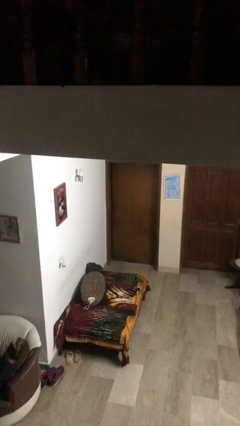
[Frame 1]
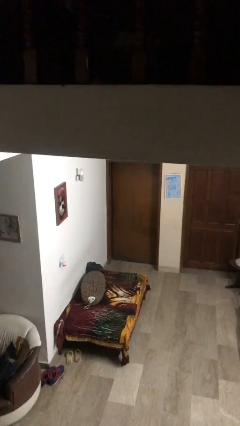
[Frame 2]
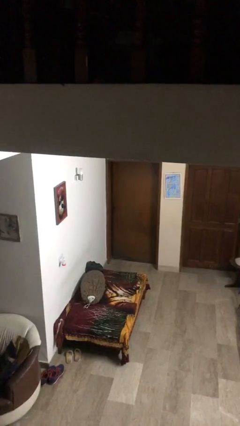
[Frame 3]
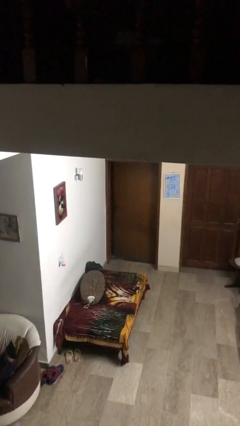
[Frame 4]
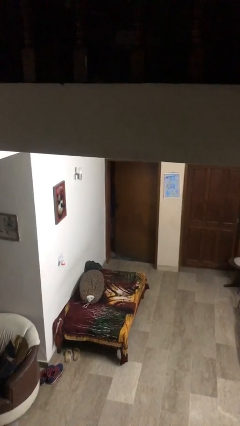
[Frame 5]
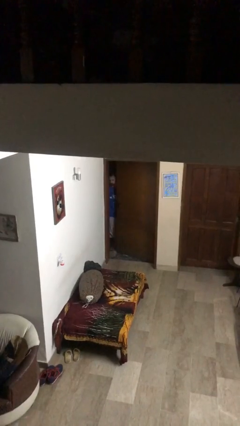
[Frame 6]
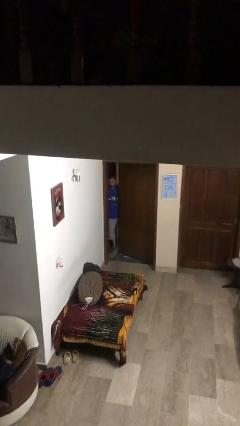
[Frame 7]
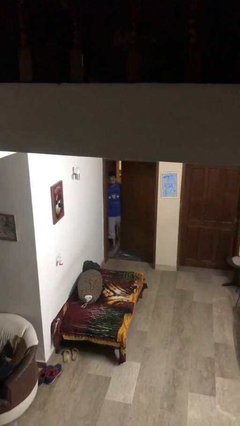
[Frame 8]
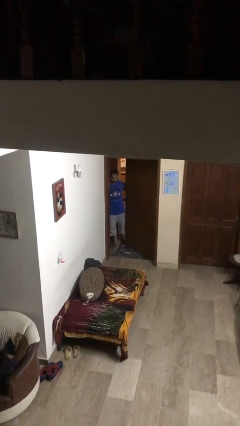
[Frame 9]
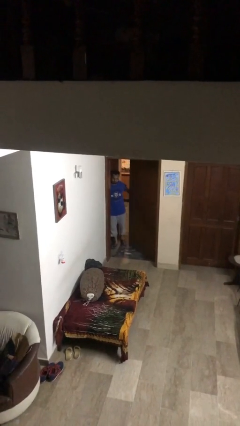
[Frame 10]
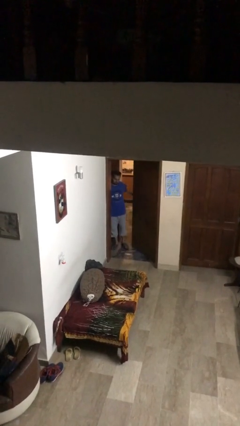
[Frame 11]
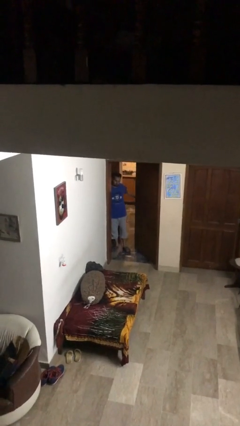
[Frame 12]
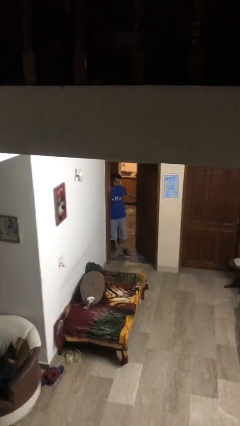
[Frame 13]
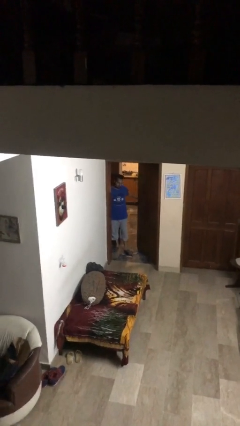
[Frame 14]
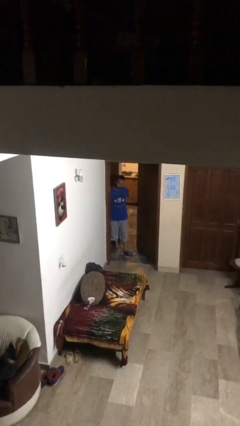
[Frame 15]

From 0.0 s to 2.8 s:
person opens facility door

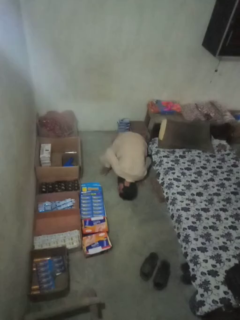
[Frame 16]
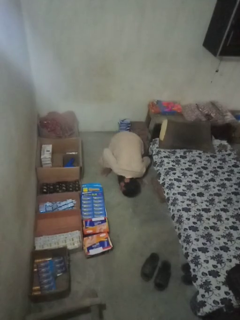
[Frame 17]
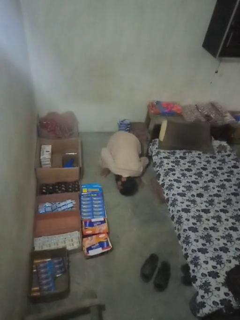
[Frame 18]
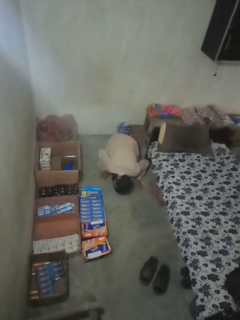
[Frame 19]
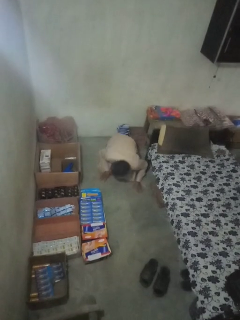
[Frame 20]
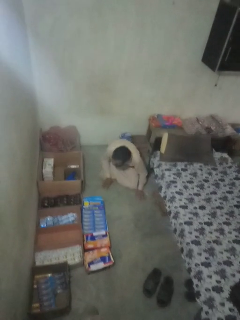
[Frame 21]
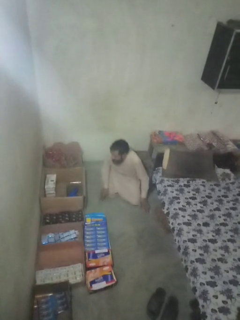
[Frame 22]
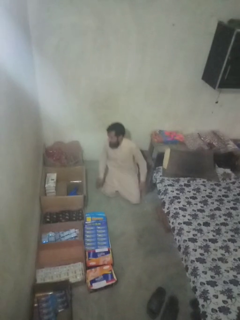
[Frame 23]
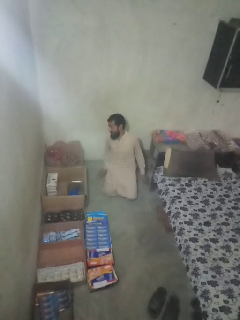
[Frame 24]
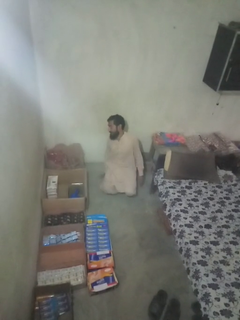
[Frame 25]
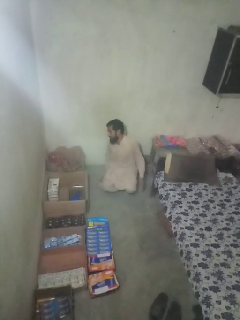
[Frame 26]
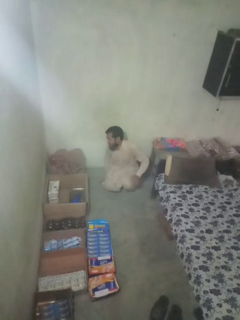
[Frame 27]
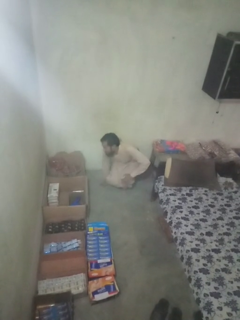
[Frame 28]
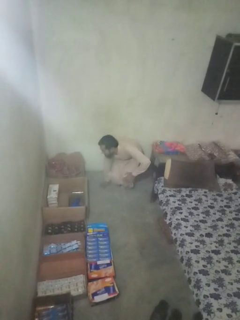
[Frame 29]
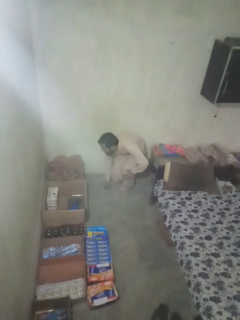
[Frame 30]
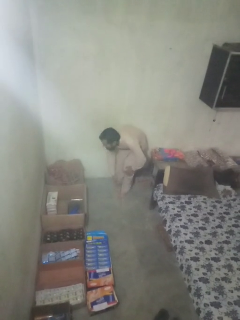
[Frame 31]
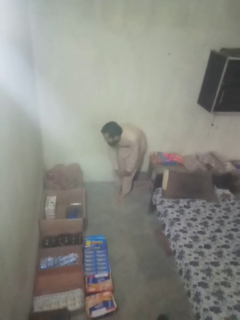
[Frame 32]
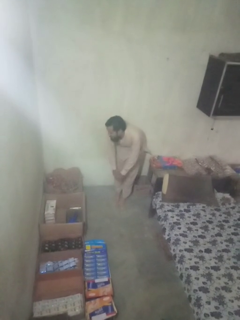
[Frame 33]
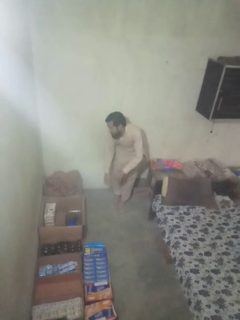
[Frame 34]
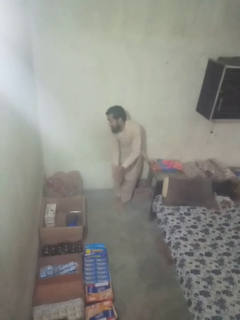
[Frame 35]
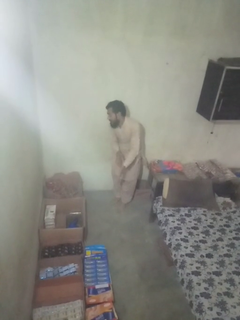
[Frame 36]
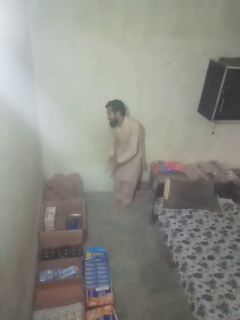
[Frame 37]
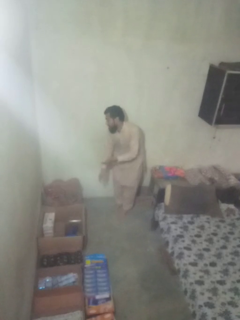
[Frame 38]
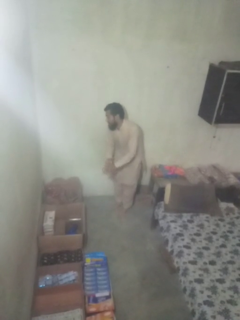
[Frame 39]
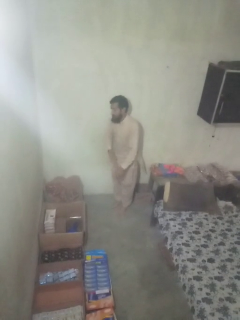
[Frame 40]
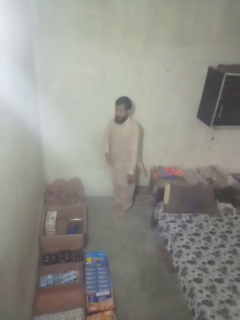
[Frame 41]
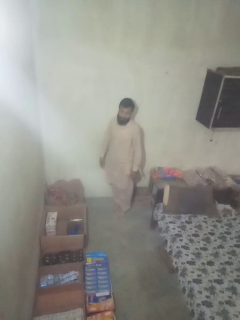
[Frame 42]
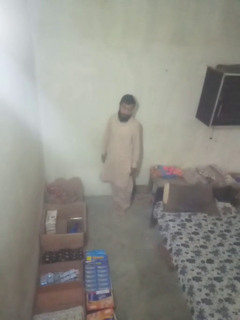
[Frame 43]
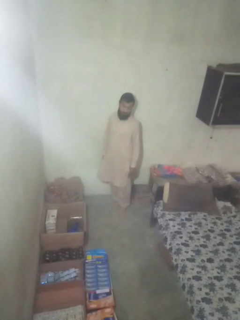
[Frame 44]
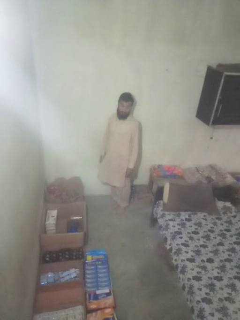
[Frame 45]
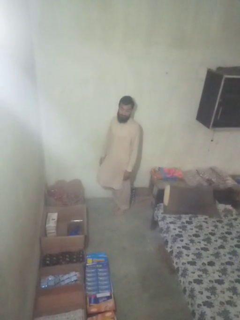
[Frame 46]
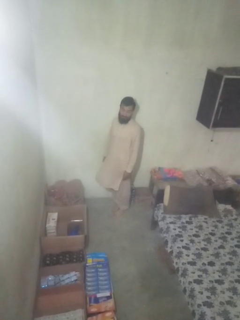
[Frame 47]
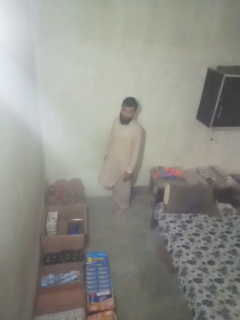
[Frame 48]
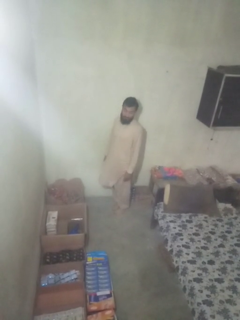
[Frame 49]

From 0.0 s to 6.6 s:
person stands up from floor

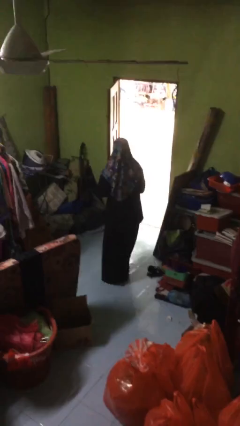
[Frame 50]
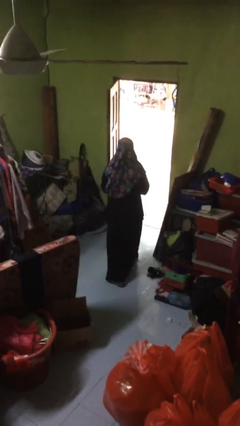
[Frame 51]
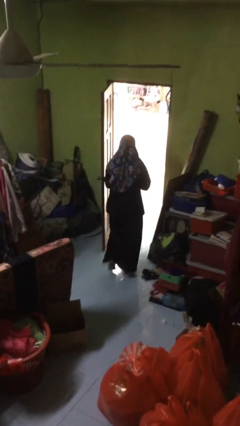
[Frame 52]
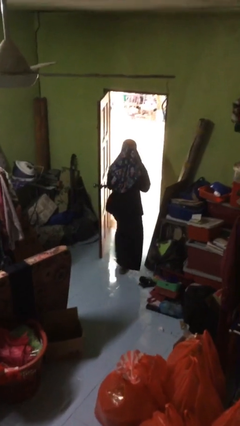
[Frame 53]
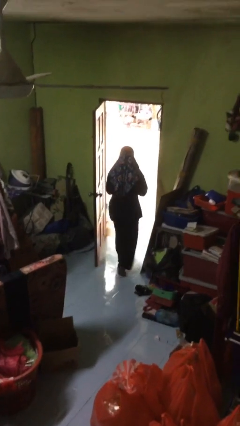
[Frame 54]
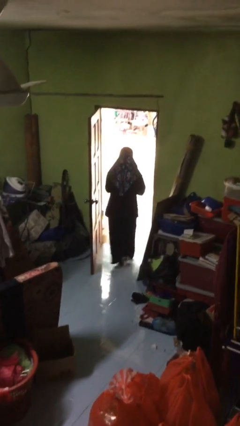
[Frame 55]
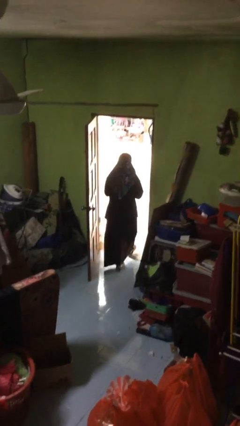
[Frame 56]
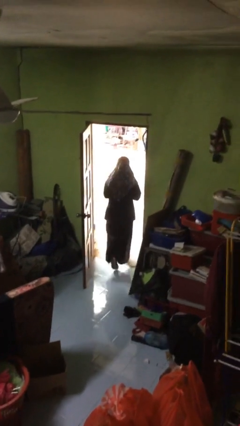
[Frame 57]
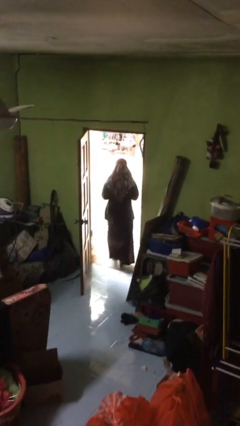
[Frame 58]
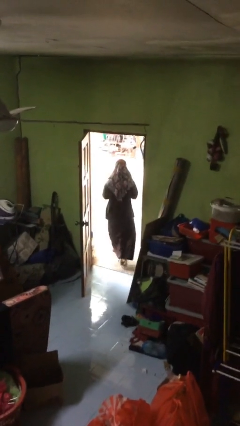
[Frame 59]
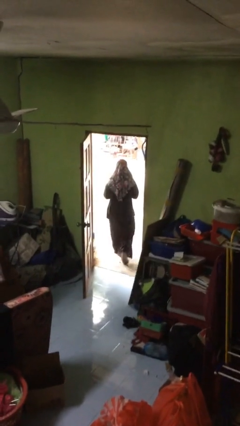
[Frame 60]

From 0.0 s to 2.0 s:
person exits scene through structure

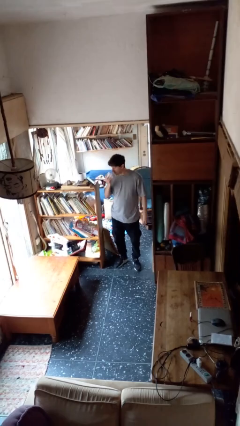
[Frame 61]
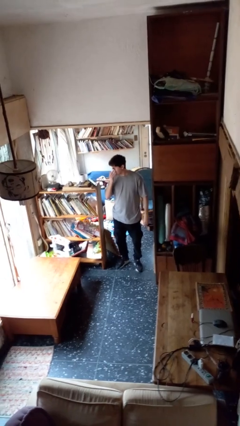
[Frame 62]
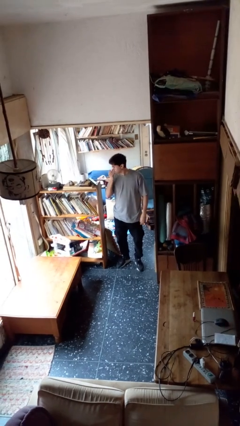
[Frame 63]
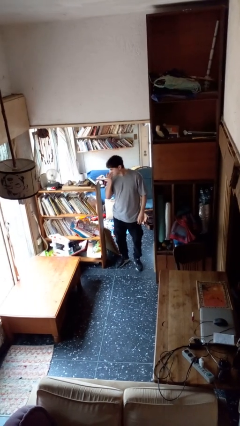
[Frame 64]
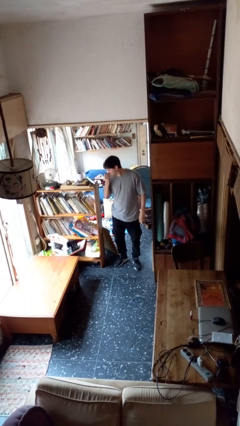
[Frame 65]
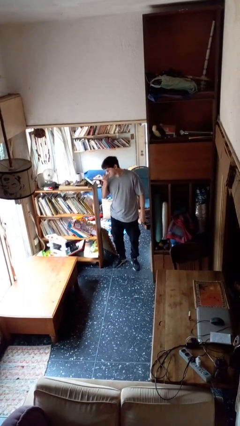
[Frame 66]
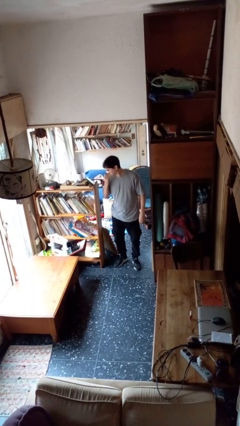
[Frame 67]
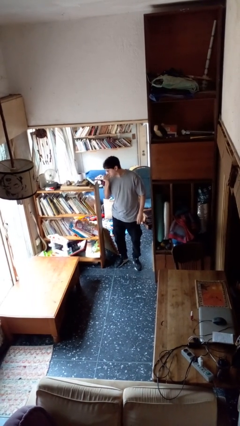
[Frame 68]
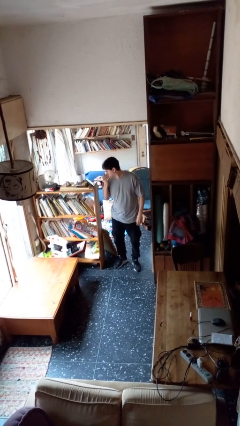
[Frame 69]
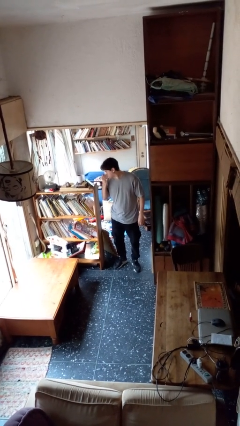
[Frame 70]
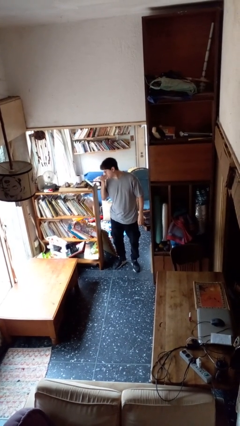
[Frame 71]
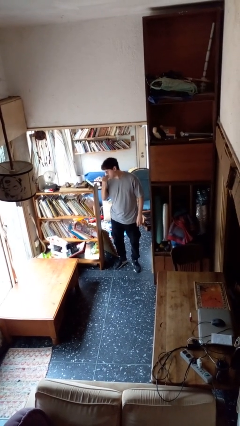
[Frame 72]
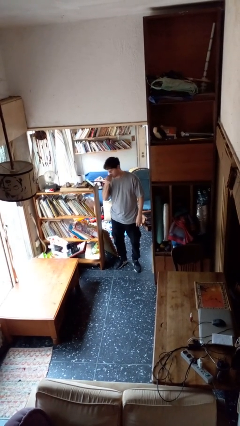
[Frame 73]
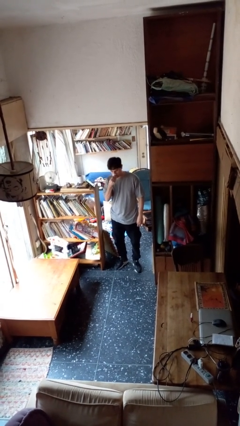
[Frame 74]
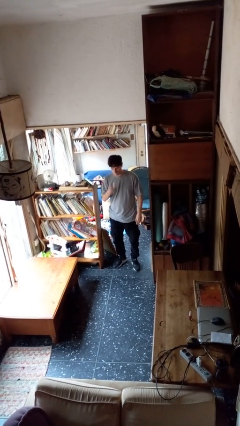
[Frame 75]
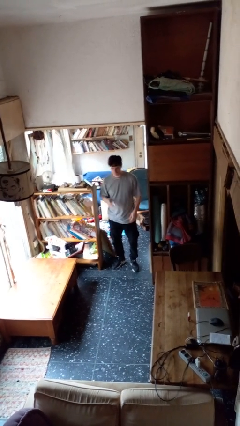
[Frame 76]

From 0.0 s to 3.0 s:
person blows nose

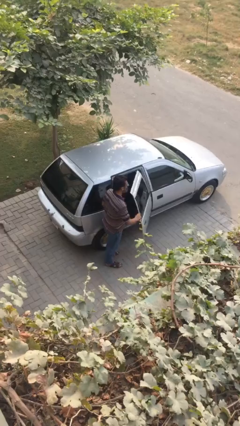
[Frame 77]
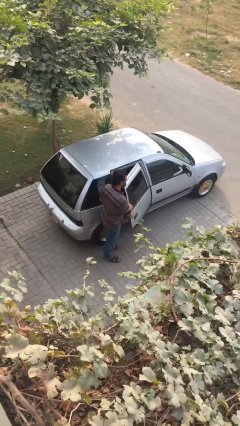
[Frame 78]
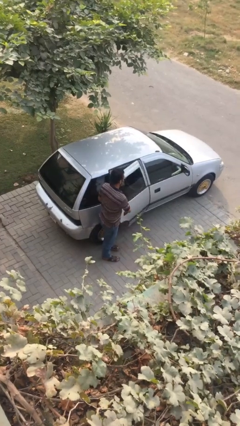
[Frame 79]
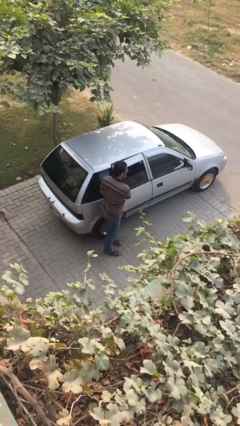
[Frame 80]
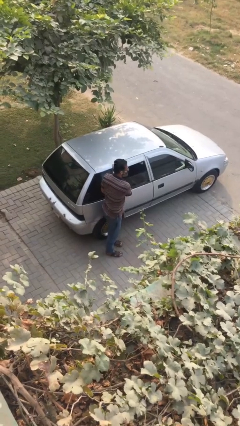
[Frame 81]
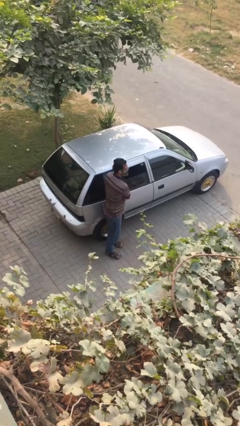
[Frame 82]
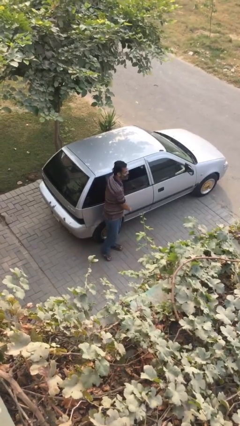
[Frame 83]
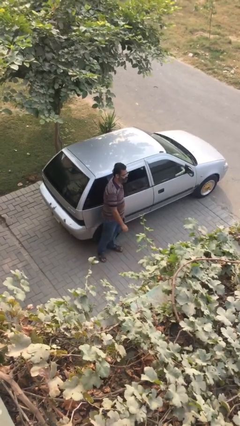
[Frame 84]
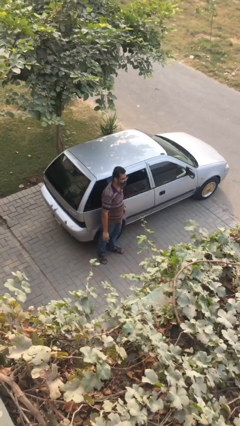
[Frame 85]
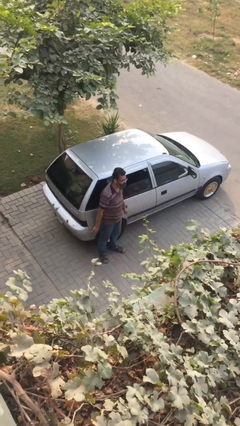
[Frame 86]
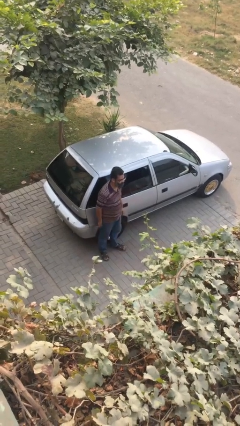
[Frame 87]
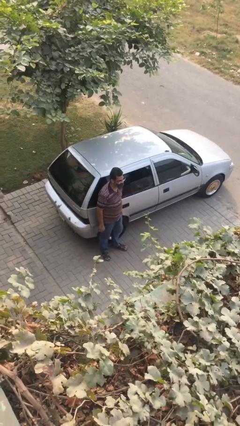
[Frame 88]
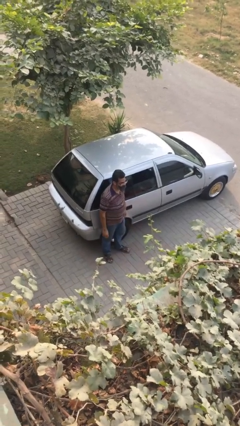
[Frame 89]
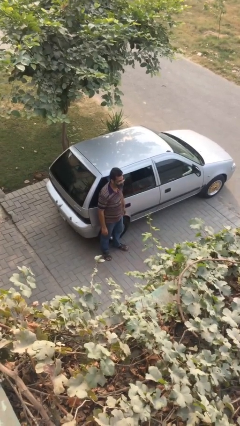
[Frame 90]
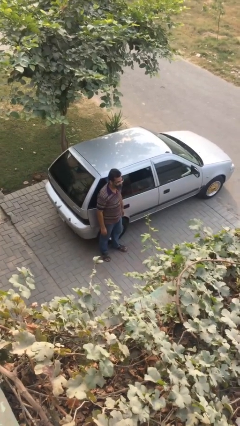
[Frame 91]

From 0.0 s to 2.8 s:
person closes car door

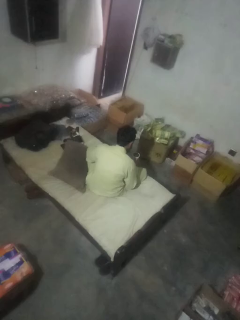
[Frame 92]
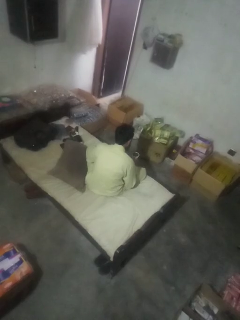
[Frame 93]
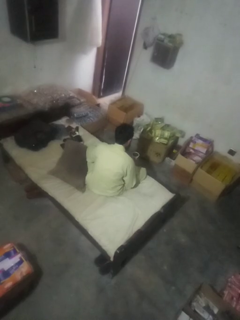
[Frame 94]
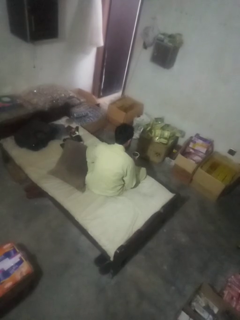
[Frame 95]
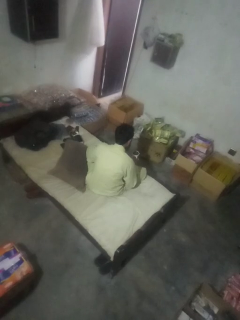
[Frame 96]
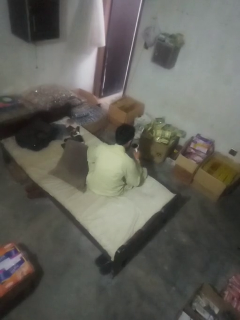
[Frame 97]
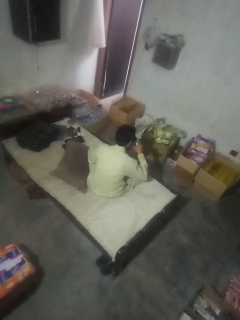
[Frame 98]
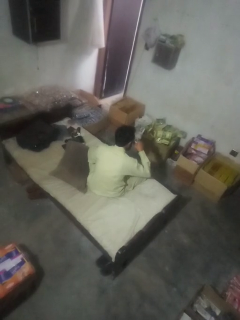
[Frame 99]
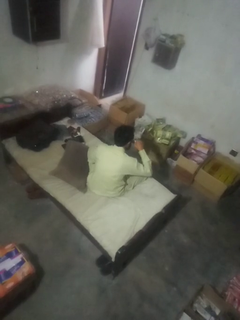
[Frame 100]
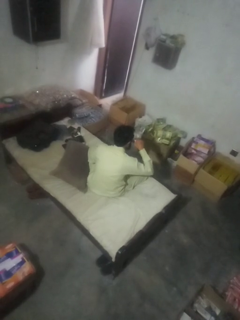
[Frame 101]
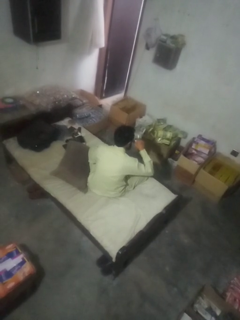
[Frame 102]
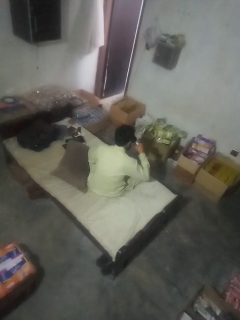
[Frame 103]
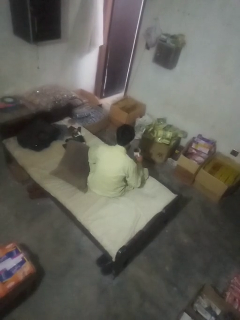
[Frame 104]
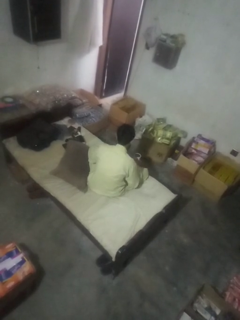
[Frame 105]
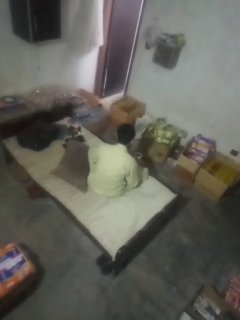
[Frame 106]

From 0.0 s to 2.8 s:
person drinks from mug
